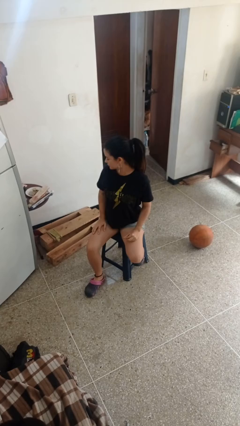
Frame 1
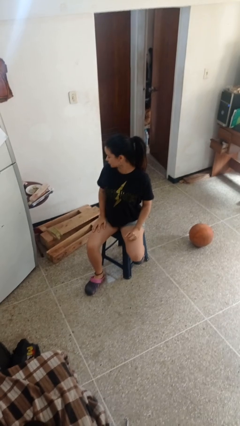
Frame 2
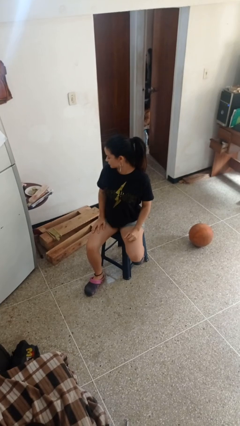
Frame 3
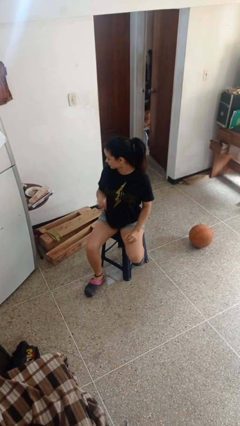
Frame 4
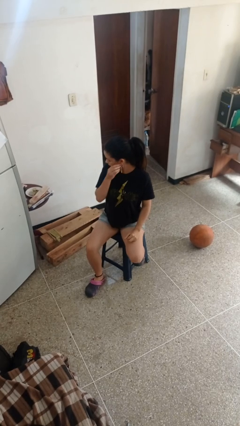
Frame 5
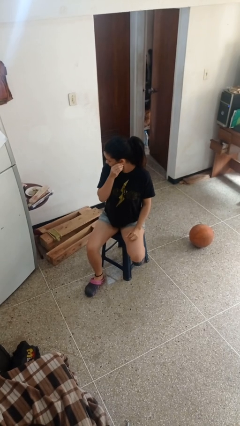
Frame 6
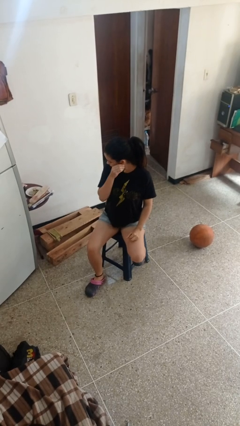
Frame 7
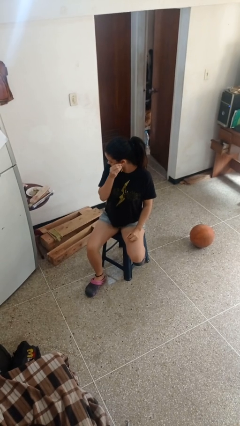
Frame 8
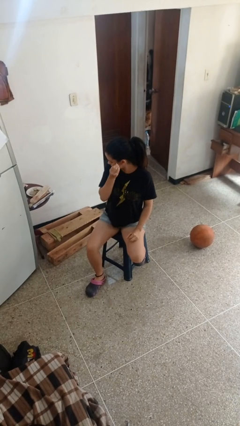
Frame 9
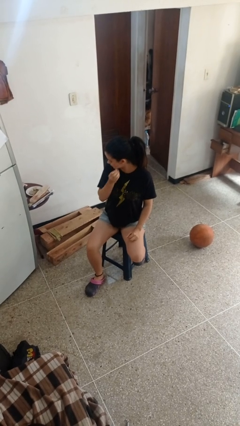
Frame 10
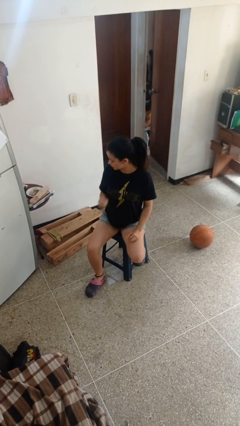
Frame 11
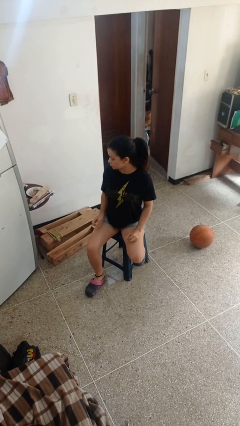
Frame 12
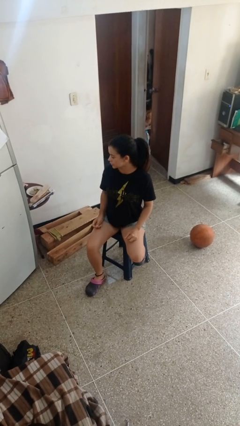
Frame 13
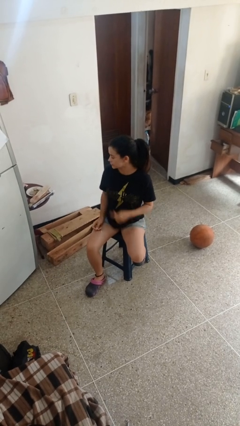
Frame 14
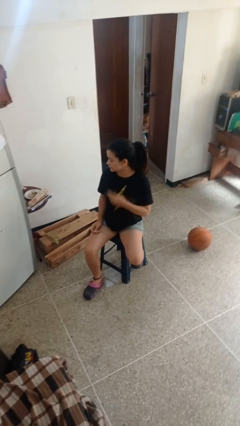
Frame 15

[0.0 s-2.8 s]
person takes off earrings

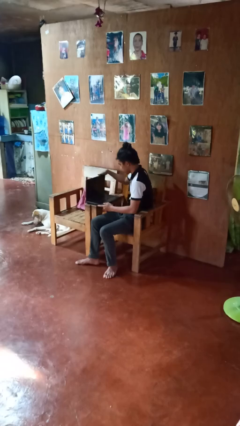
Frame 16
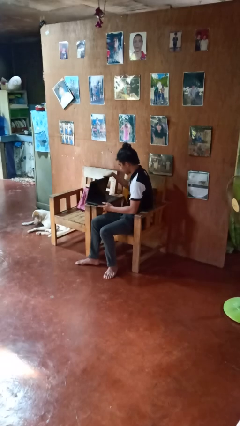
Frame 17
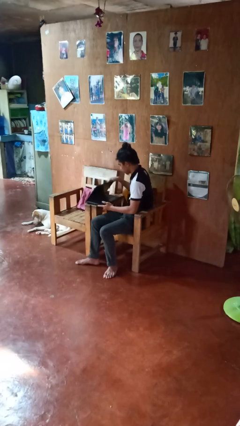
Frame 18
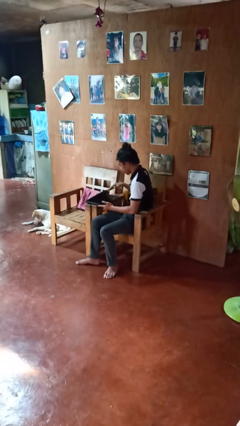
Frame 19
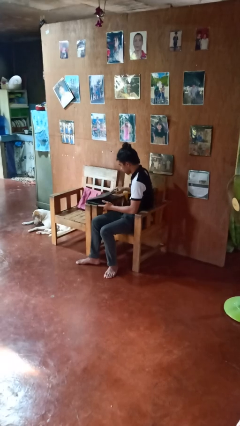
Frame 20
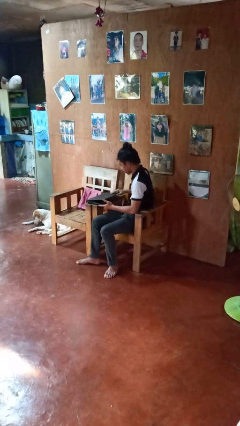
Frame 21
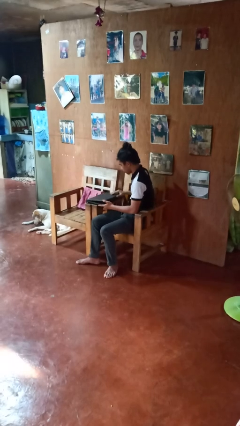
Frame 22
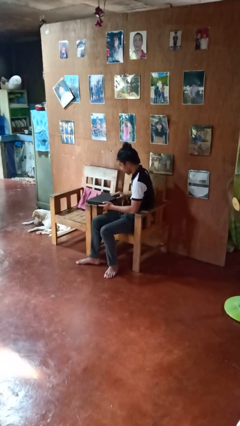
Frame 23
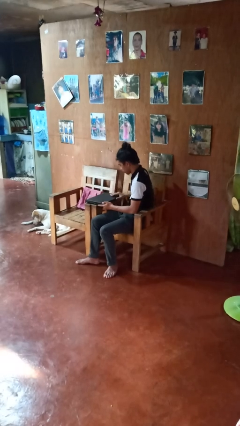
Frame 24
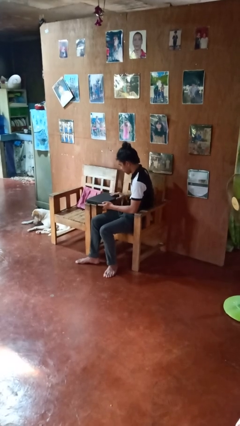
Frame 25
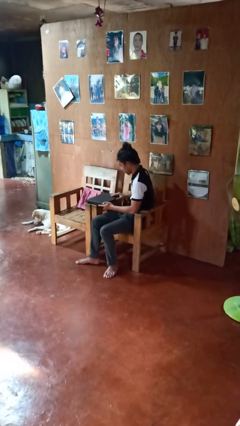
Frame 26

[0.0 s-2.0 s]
person closes laptop

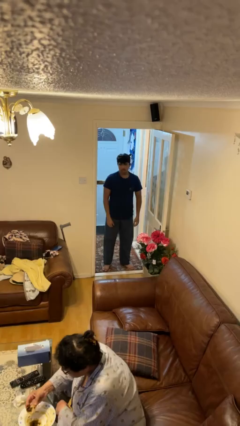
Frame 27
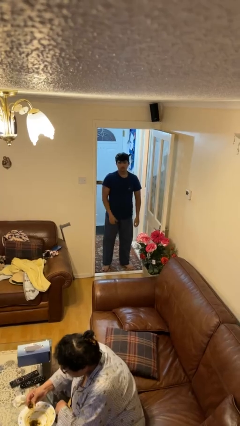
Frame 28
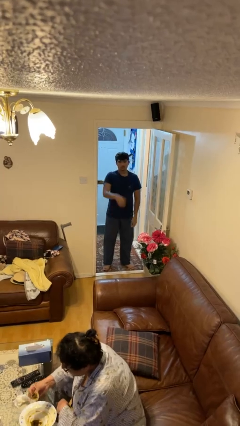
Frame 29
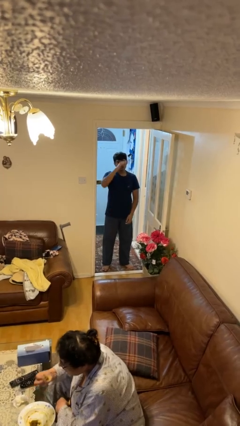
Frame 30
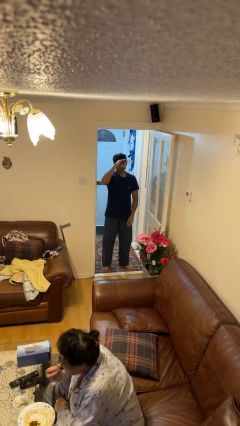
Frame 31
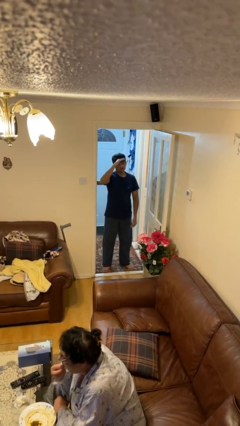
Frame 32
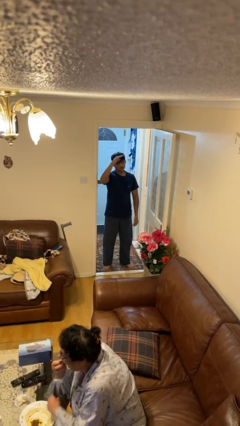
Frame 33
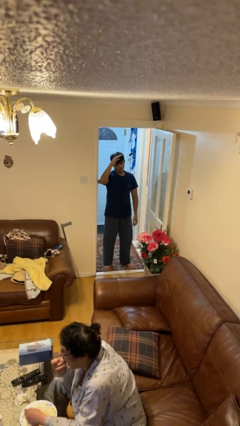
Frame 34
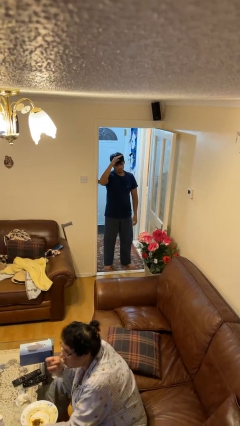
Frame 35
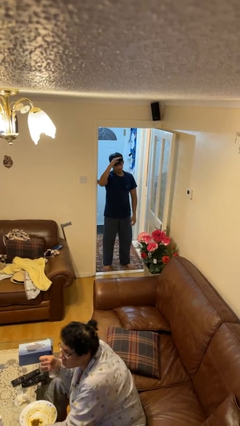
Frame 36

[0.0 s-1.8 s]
person salutes

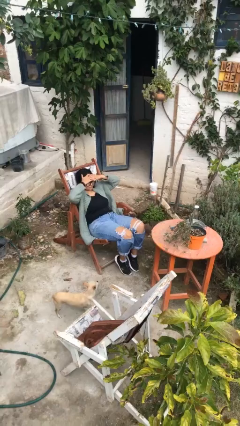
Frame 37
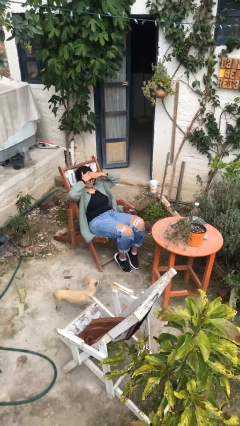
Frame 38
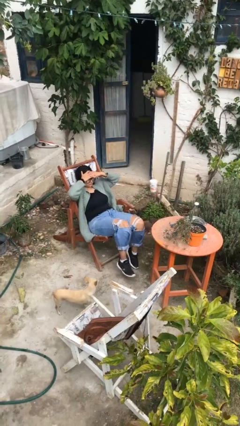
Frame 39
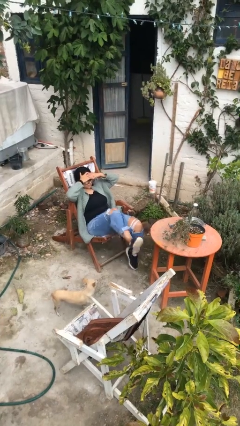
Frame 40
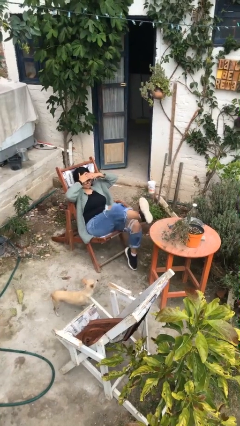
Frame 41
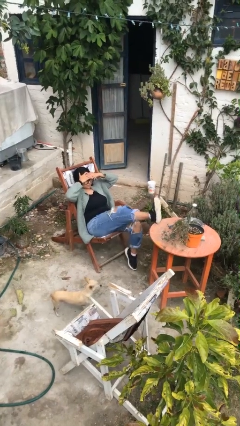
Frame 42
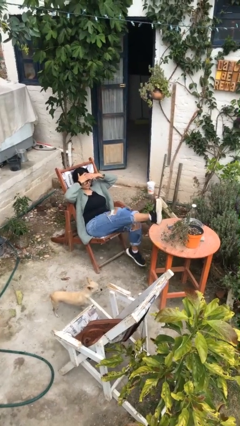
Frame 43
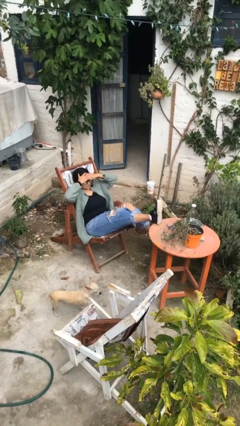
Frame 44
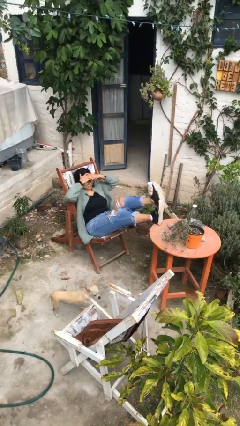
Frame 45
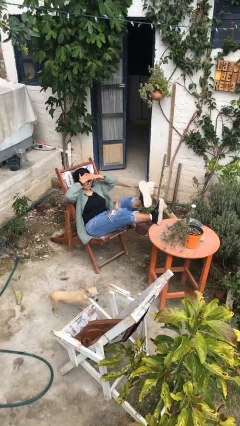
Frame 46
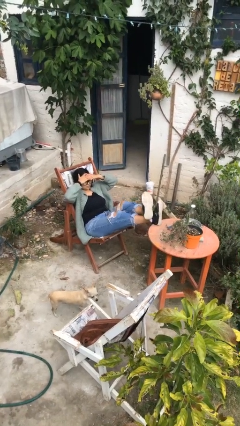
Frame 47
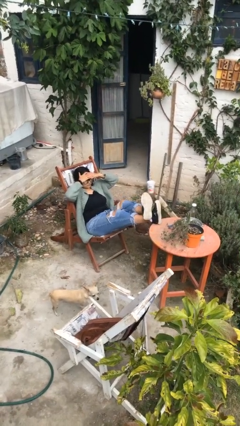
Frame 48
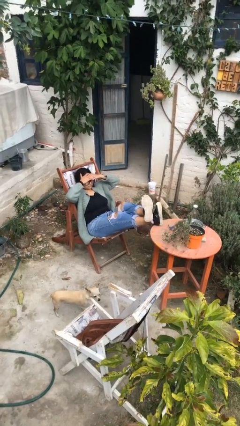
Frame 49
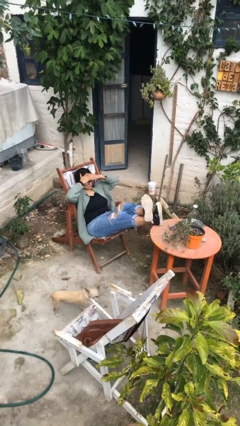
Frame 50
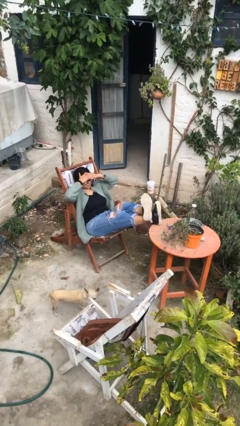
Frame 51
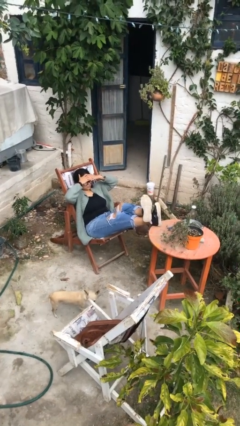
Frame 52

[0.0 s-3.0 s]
person puts feet up

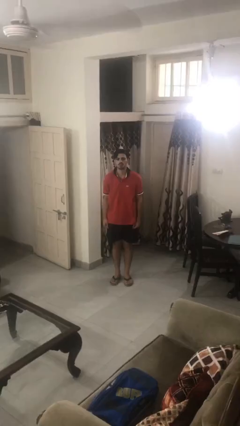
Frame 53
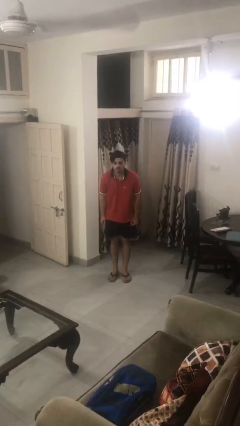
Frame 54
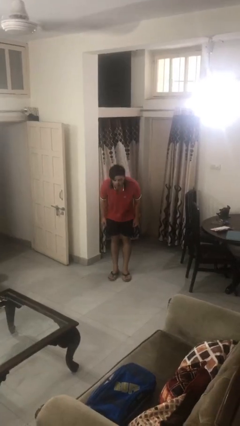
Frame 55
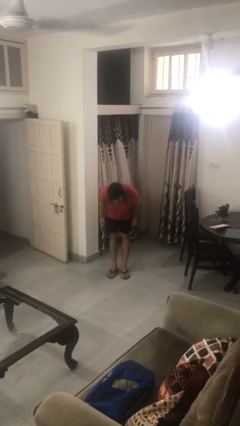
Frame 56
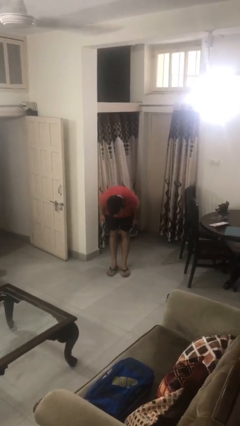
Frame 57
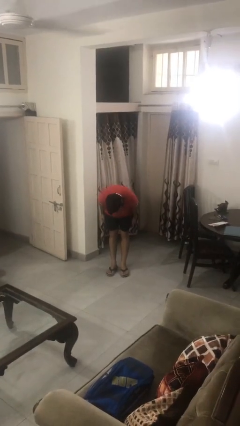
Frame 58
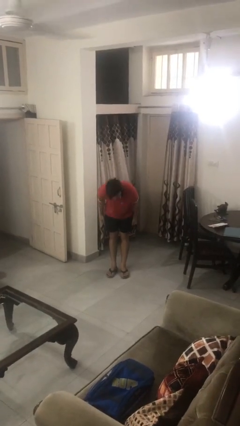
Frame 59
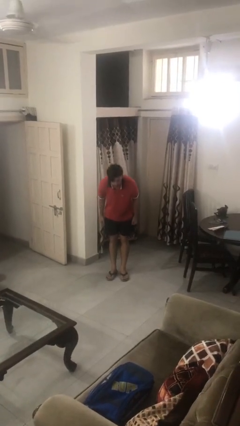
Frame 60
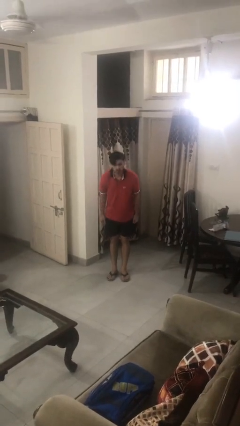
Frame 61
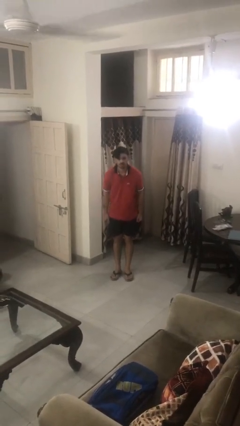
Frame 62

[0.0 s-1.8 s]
person bows

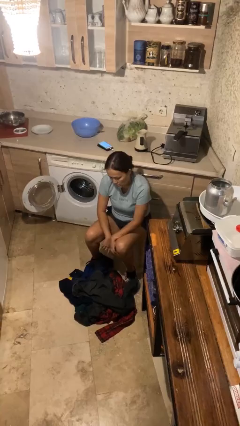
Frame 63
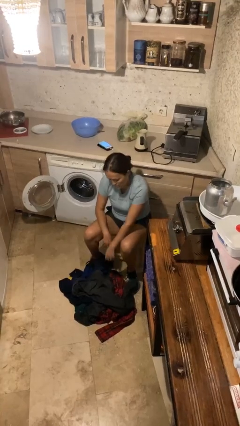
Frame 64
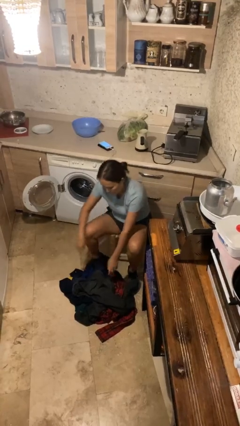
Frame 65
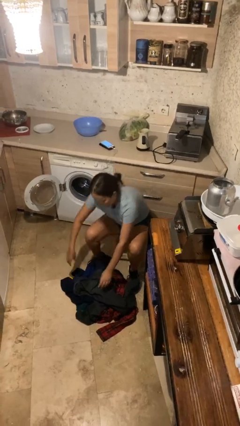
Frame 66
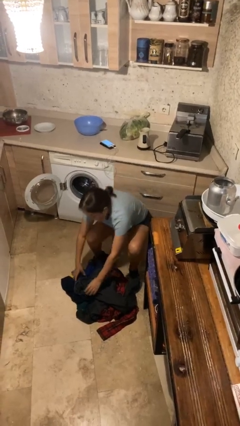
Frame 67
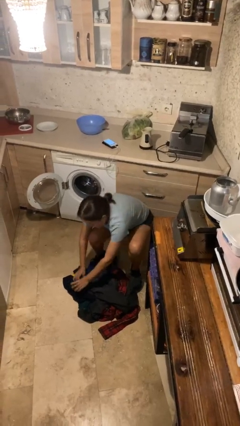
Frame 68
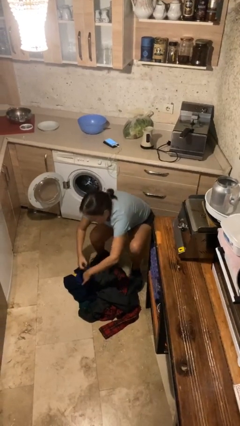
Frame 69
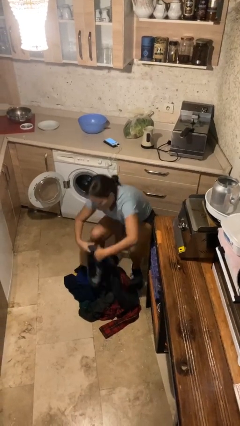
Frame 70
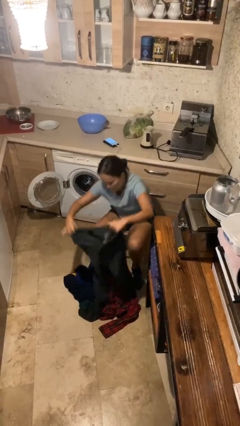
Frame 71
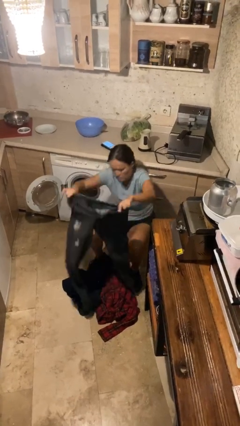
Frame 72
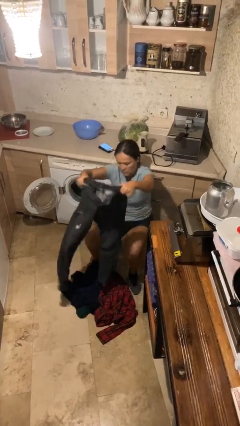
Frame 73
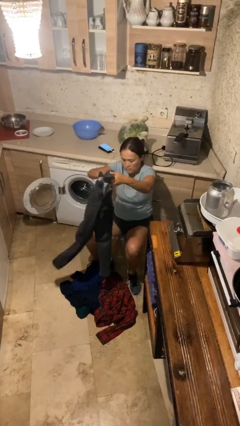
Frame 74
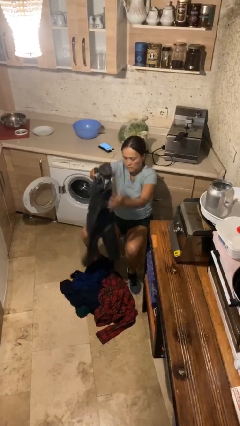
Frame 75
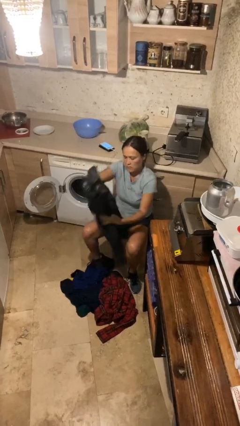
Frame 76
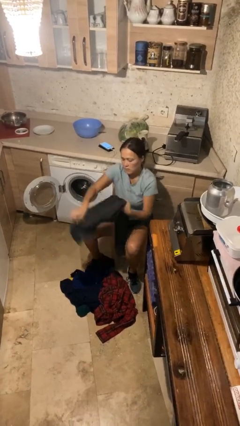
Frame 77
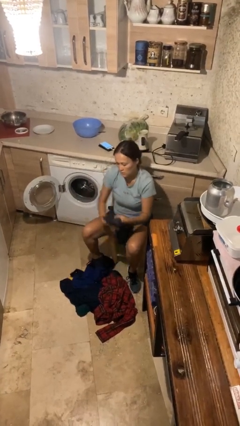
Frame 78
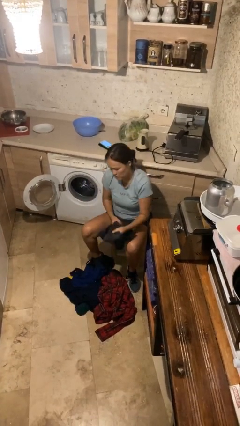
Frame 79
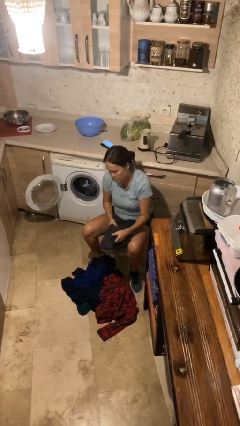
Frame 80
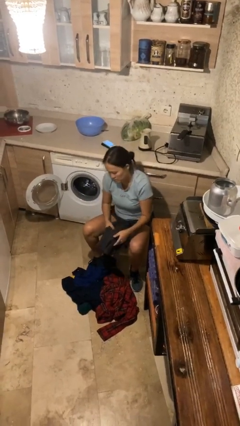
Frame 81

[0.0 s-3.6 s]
person folds pants

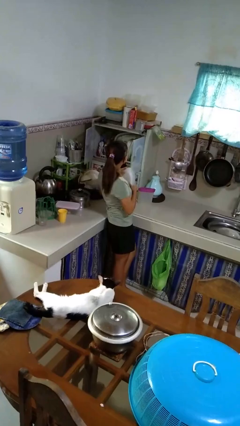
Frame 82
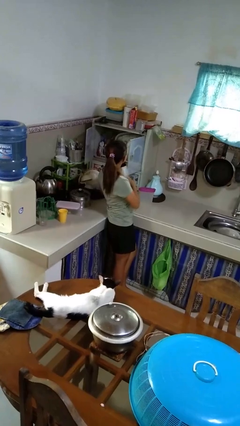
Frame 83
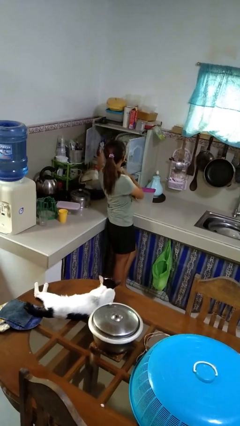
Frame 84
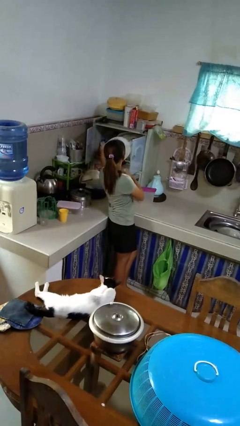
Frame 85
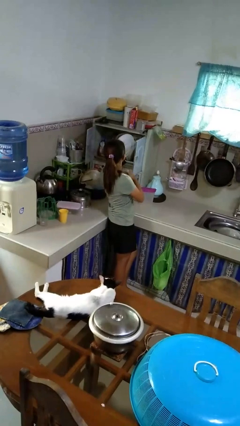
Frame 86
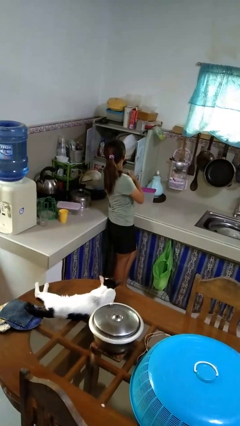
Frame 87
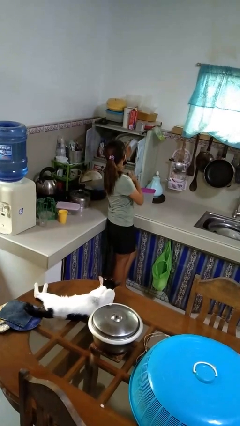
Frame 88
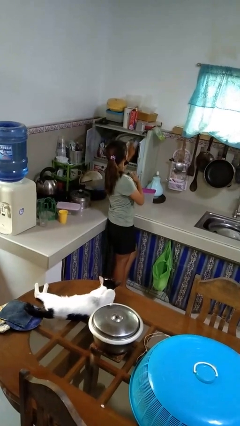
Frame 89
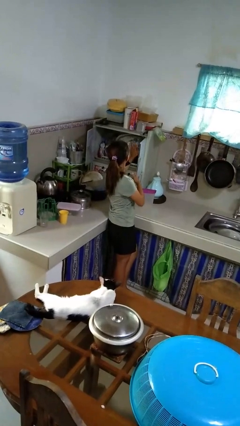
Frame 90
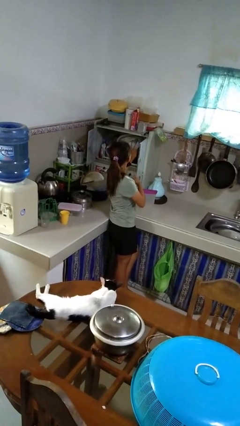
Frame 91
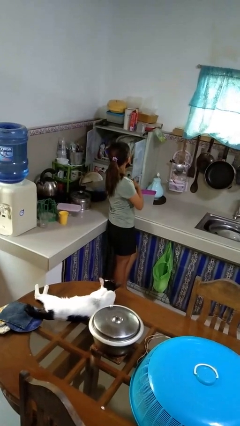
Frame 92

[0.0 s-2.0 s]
person puts object into kitchen drawer
